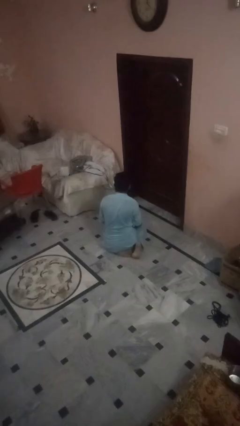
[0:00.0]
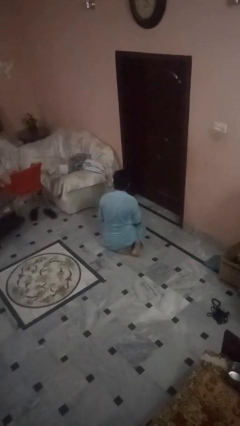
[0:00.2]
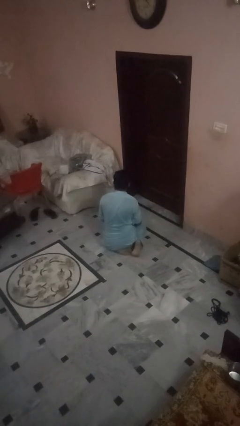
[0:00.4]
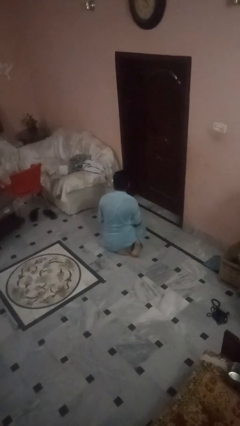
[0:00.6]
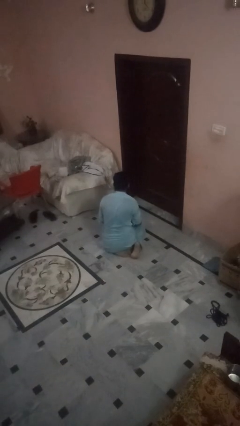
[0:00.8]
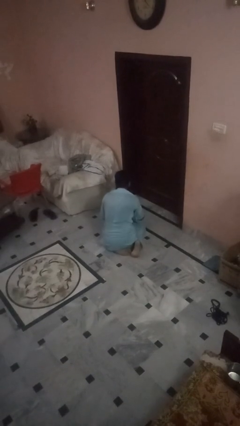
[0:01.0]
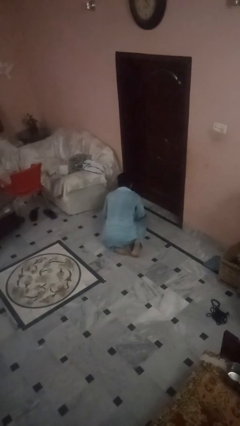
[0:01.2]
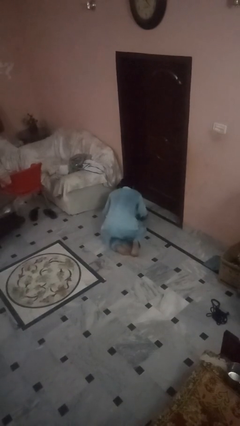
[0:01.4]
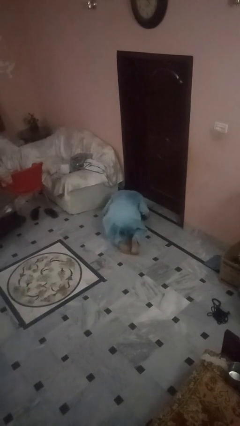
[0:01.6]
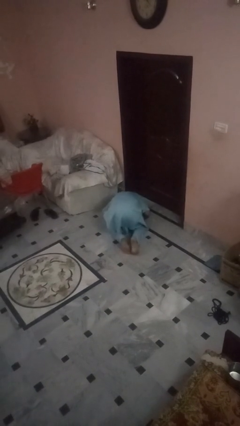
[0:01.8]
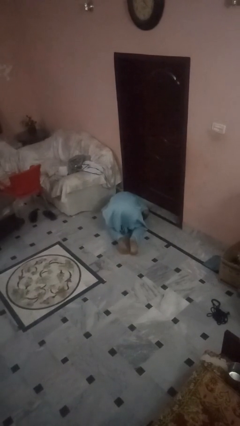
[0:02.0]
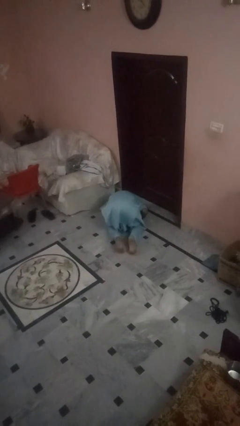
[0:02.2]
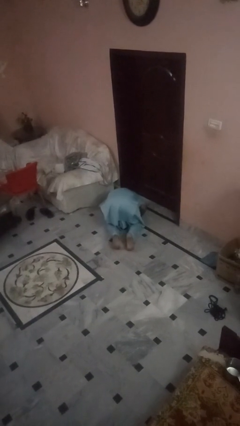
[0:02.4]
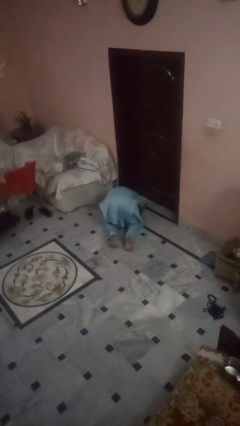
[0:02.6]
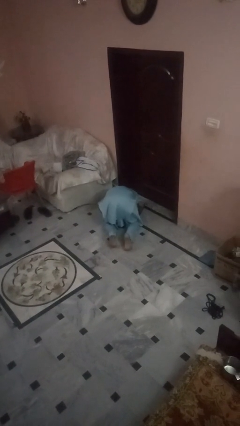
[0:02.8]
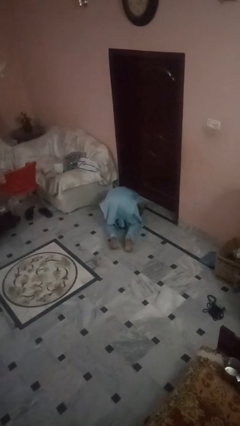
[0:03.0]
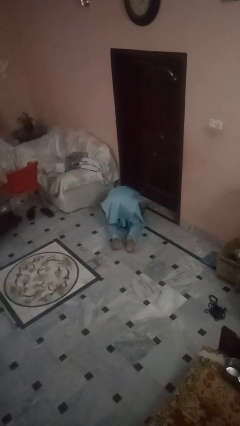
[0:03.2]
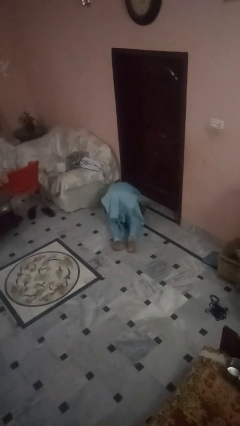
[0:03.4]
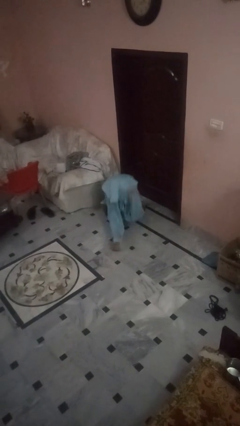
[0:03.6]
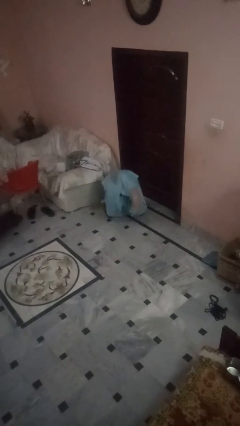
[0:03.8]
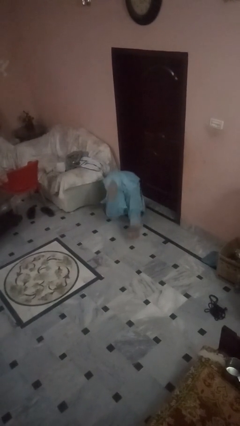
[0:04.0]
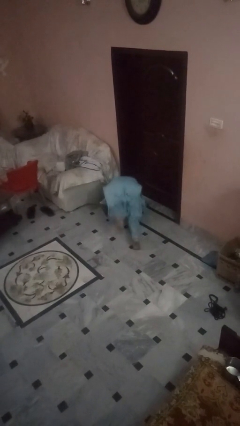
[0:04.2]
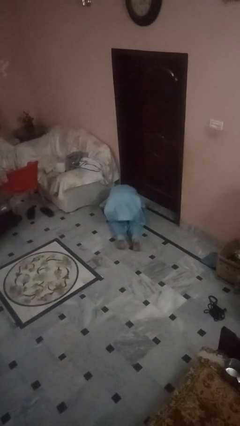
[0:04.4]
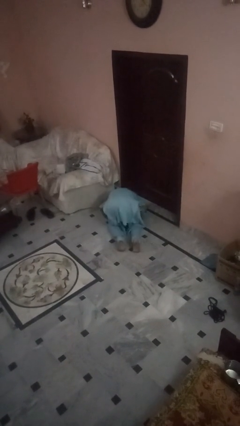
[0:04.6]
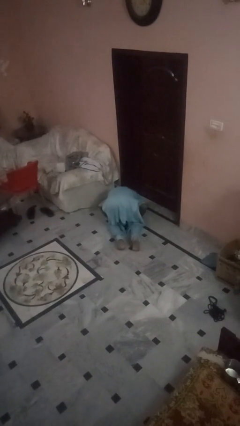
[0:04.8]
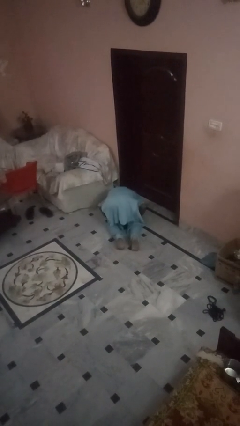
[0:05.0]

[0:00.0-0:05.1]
person somersaults

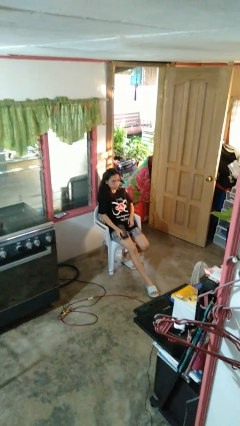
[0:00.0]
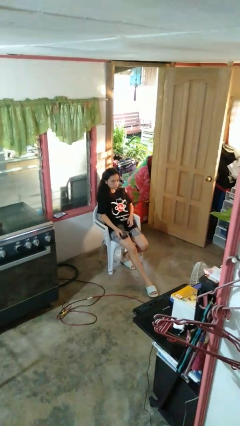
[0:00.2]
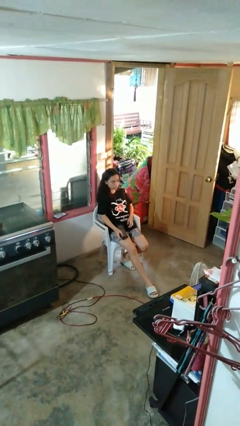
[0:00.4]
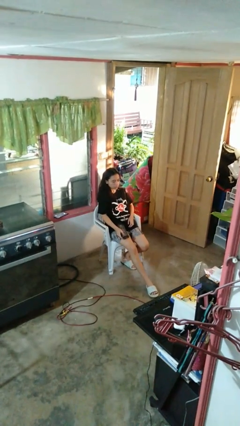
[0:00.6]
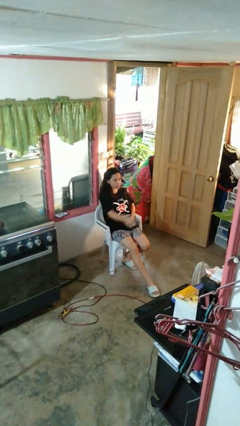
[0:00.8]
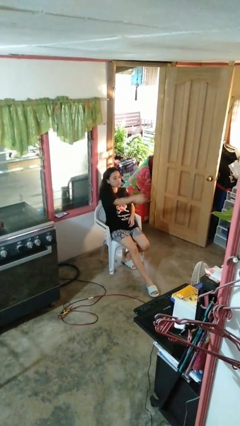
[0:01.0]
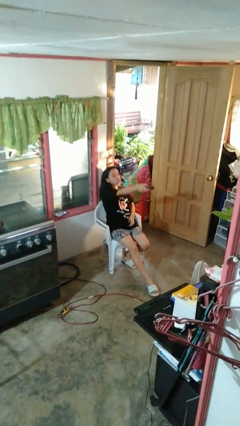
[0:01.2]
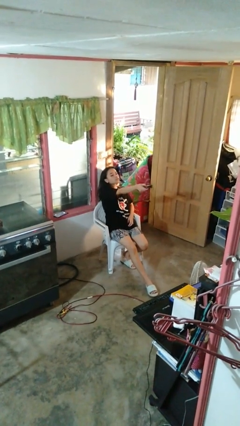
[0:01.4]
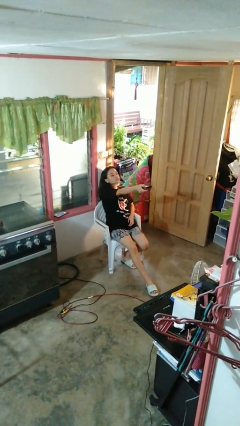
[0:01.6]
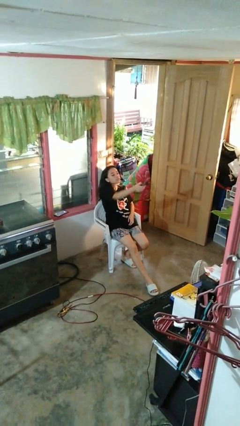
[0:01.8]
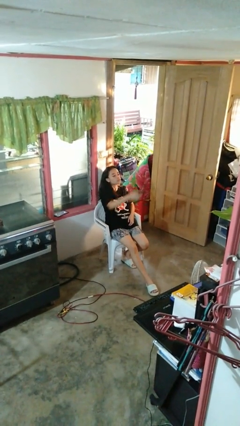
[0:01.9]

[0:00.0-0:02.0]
person uses television remote

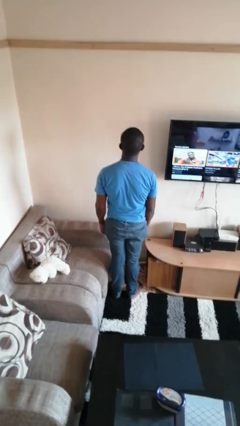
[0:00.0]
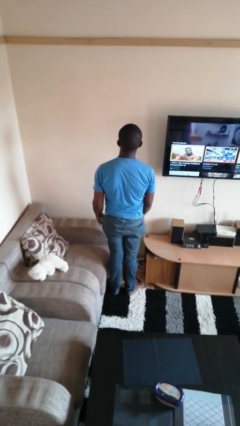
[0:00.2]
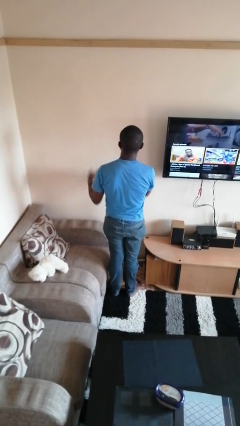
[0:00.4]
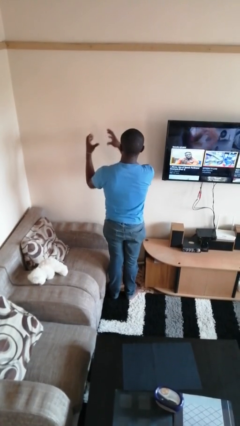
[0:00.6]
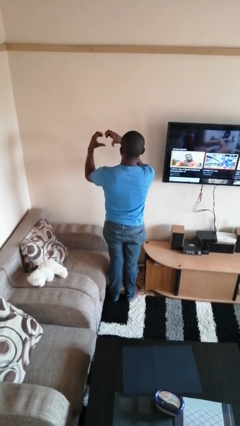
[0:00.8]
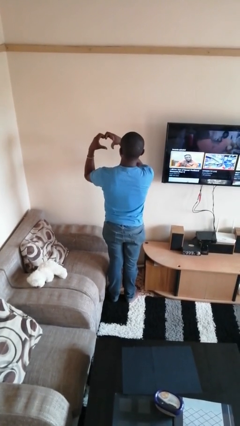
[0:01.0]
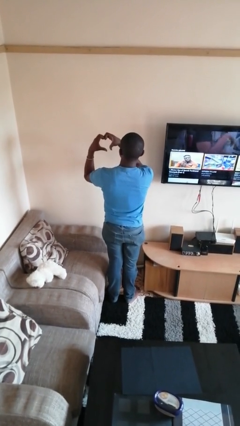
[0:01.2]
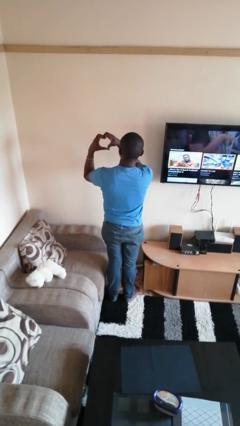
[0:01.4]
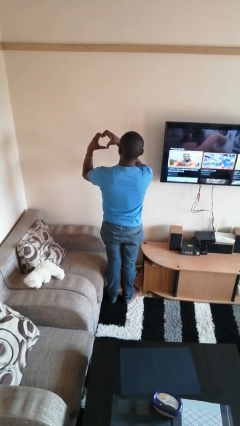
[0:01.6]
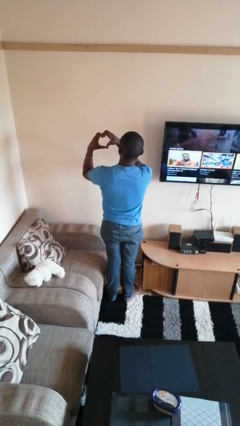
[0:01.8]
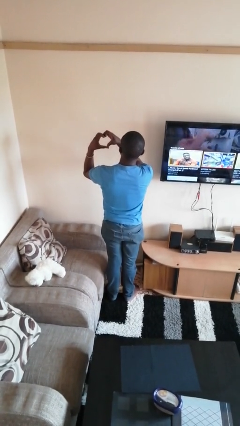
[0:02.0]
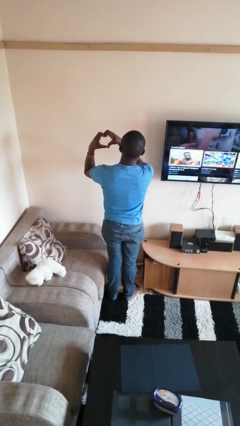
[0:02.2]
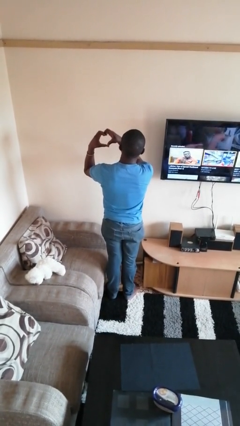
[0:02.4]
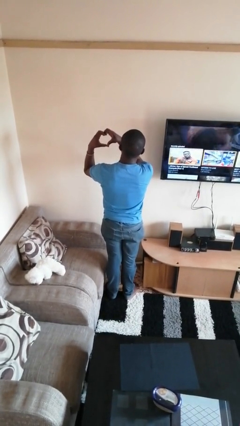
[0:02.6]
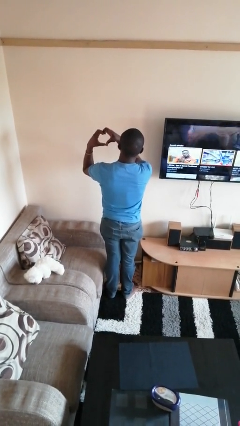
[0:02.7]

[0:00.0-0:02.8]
person gestures heart

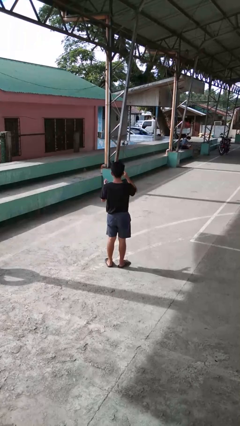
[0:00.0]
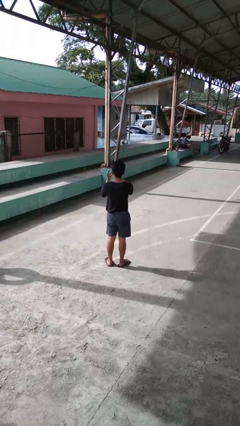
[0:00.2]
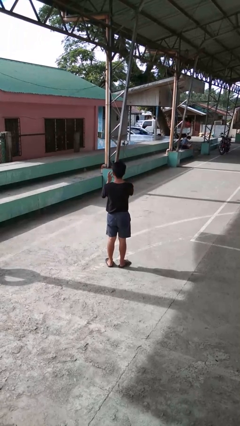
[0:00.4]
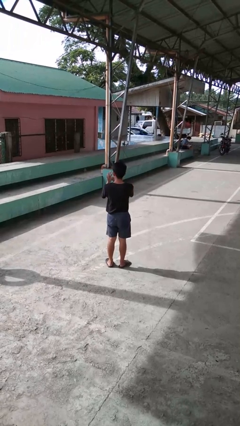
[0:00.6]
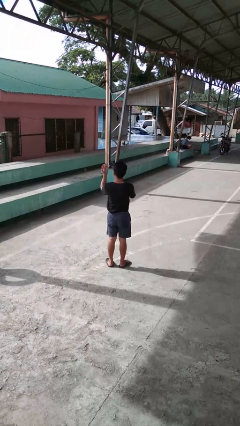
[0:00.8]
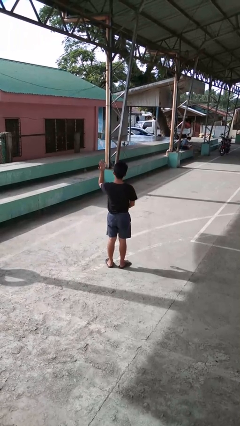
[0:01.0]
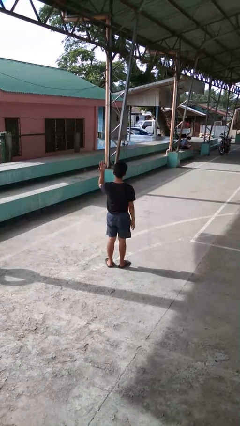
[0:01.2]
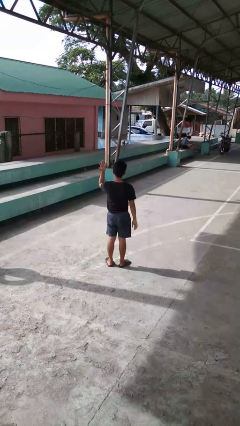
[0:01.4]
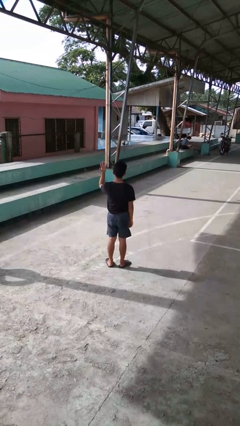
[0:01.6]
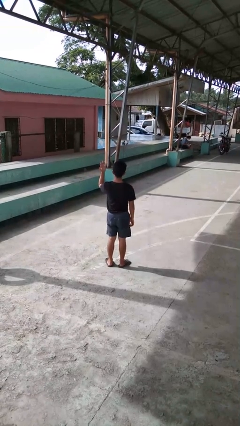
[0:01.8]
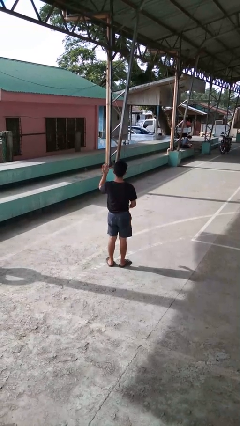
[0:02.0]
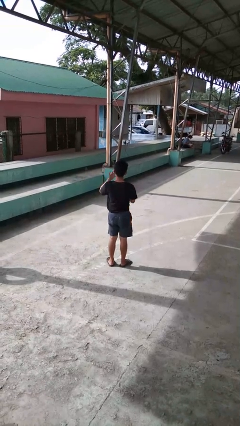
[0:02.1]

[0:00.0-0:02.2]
person puts on ring

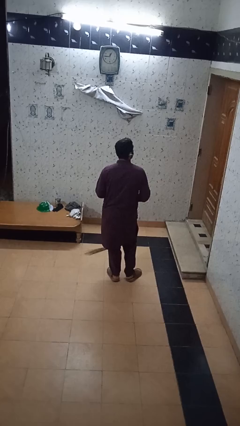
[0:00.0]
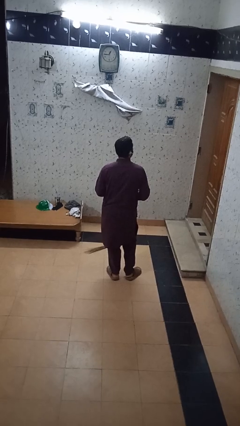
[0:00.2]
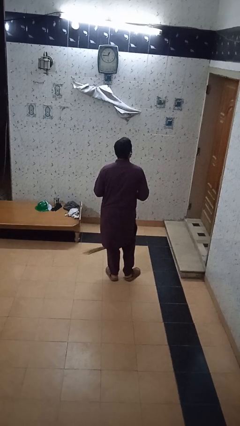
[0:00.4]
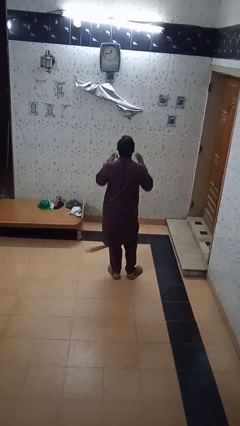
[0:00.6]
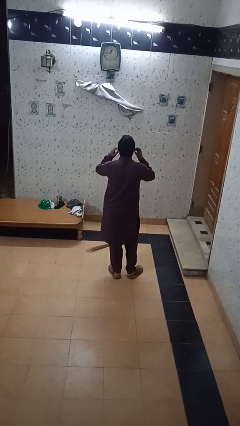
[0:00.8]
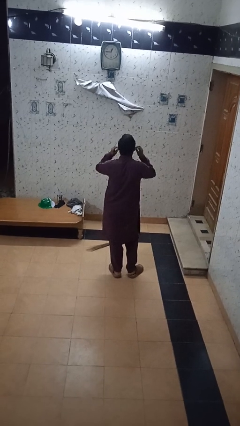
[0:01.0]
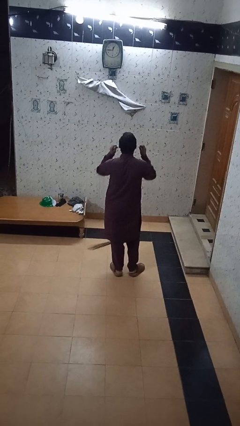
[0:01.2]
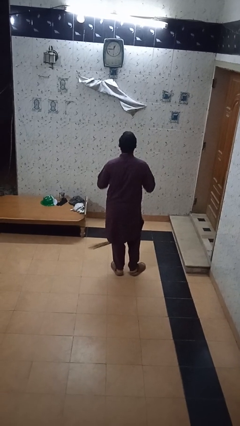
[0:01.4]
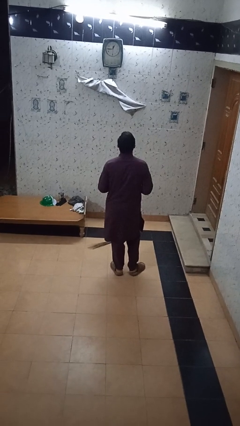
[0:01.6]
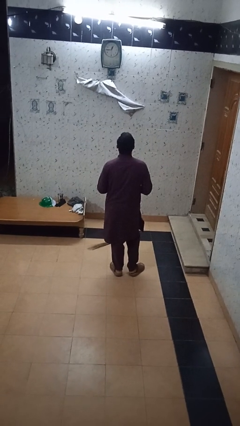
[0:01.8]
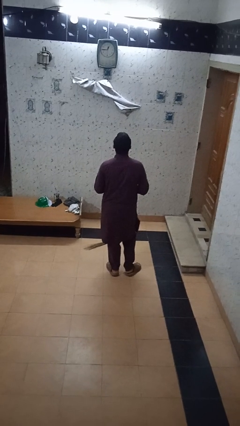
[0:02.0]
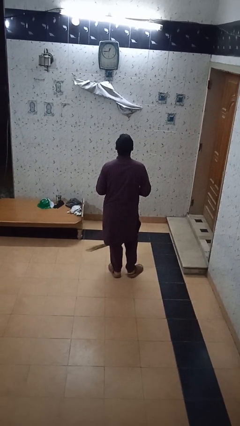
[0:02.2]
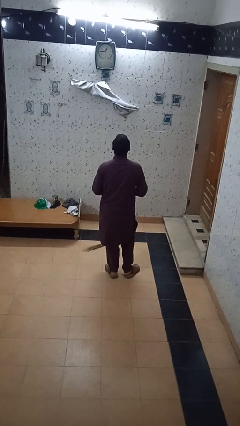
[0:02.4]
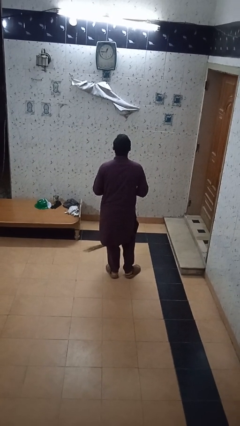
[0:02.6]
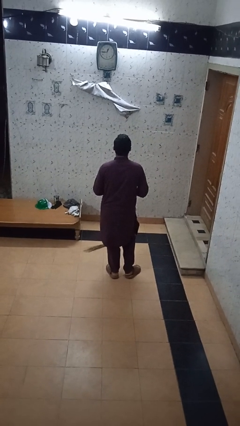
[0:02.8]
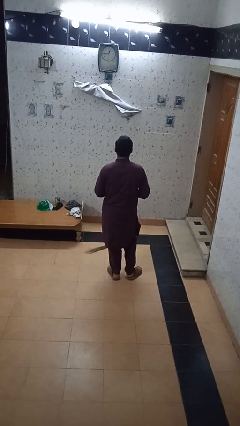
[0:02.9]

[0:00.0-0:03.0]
person takes off headphones

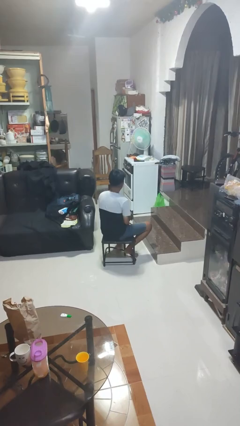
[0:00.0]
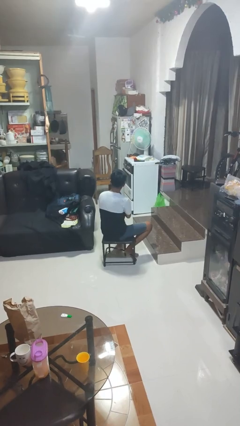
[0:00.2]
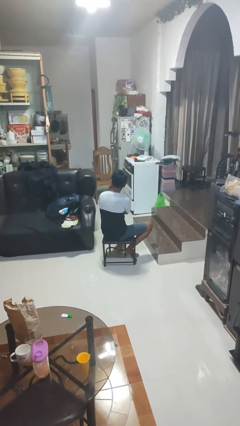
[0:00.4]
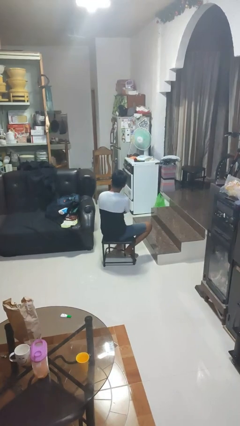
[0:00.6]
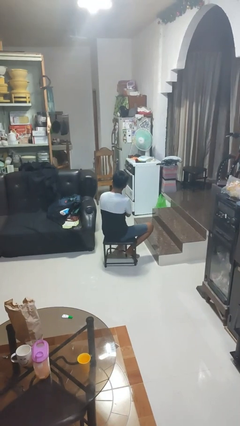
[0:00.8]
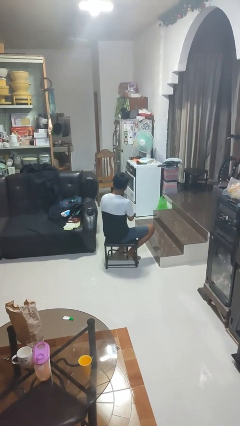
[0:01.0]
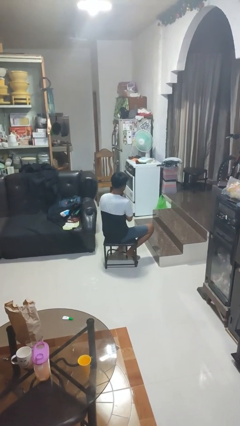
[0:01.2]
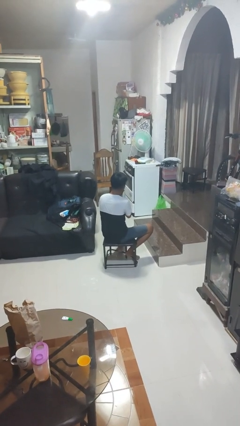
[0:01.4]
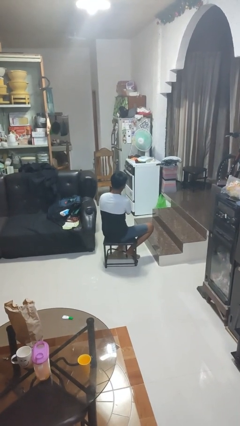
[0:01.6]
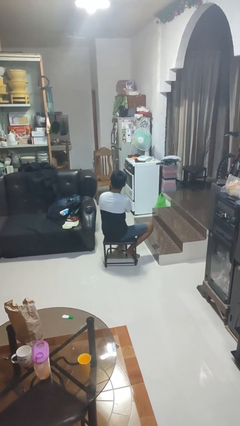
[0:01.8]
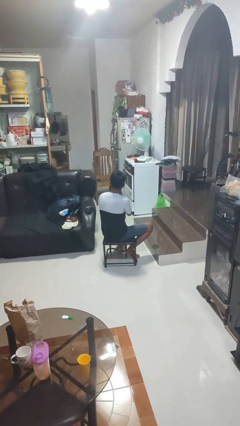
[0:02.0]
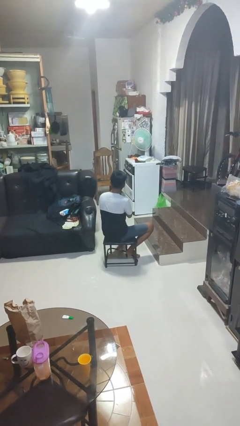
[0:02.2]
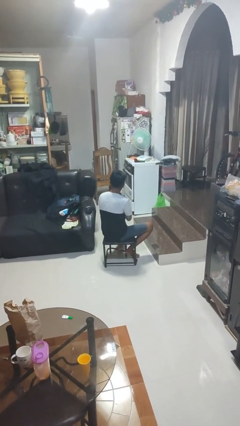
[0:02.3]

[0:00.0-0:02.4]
person strokes chin
